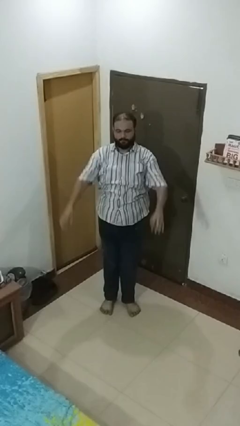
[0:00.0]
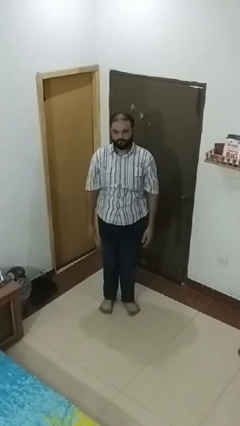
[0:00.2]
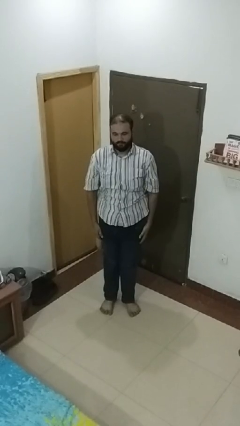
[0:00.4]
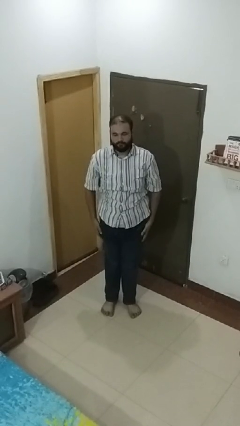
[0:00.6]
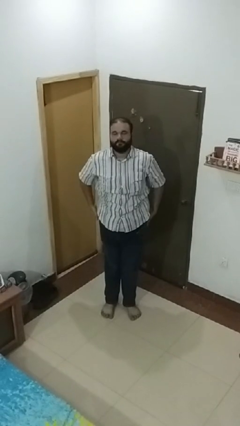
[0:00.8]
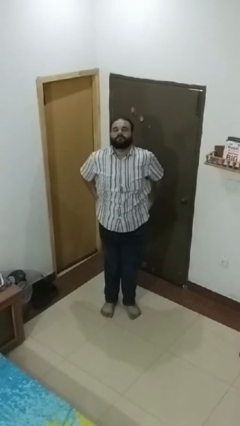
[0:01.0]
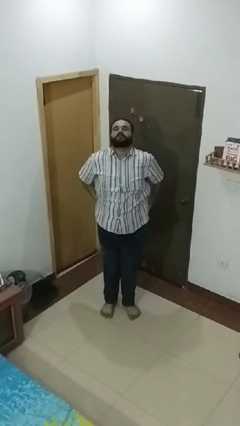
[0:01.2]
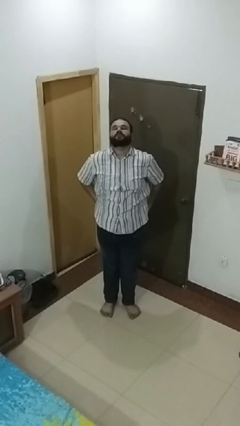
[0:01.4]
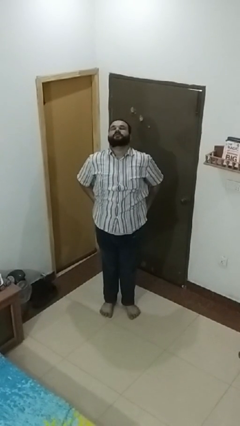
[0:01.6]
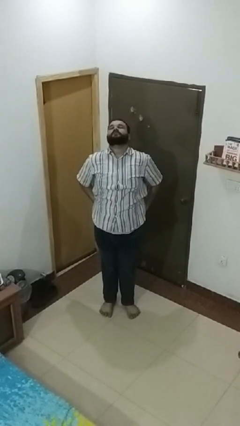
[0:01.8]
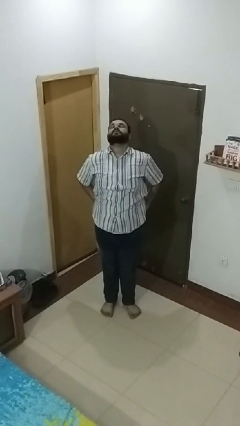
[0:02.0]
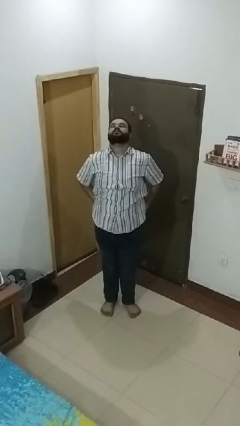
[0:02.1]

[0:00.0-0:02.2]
person stretches back

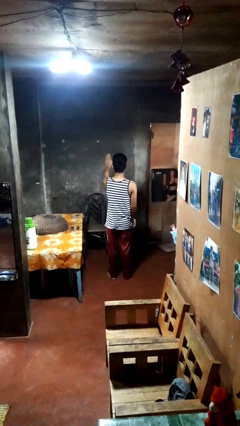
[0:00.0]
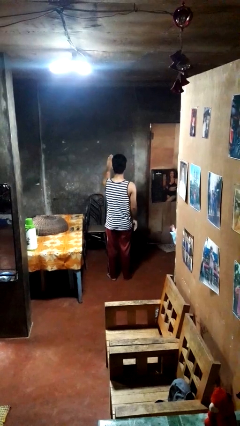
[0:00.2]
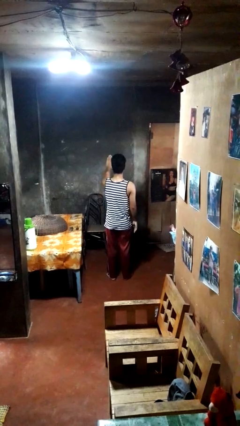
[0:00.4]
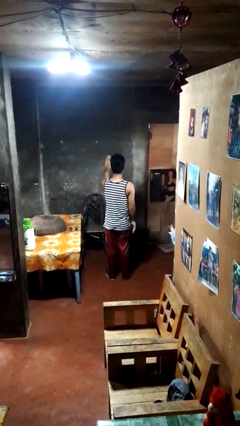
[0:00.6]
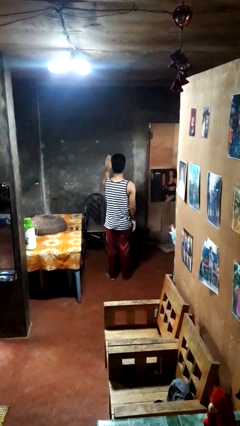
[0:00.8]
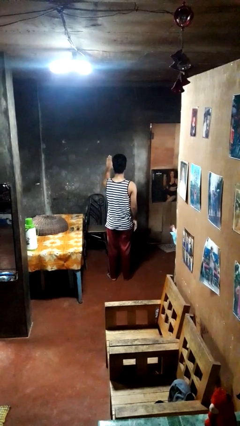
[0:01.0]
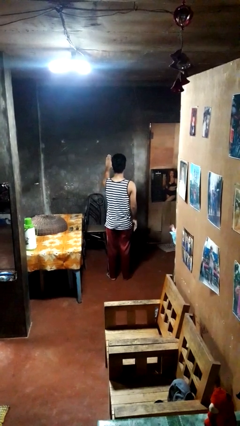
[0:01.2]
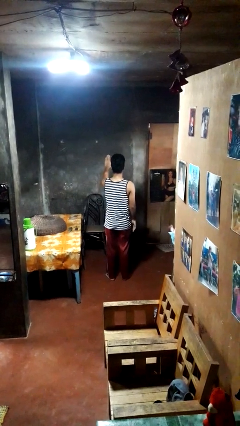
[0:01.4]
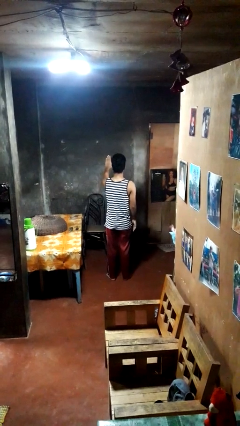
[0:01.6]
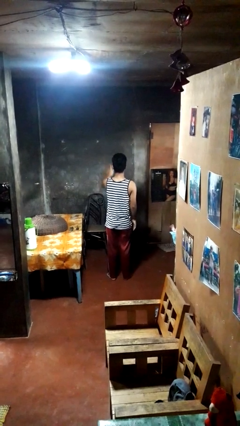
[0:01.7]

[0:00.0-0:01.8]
person gestures stop

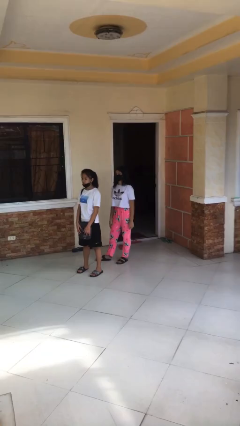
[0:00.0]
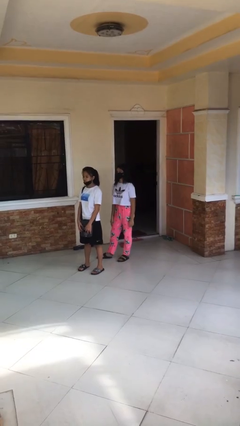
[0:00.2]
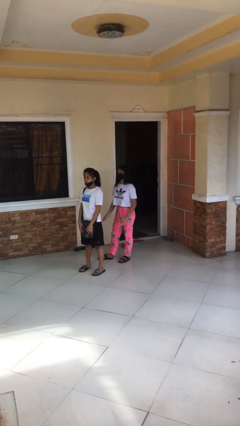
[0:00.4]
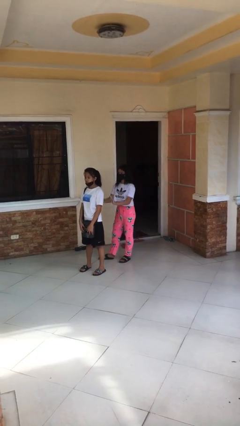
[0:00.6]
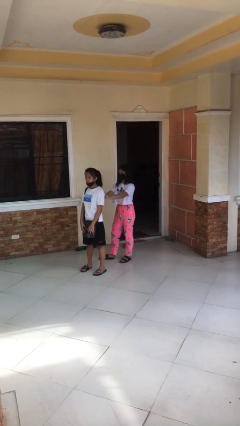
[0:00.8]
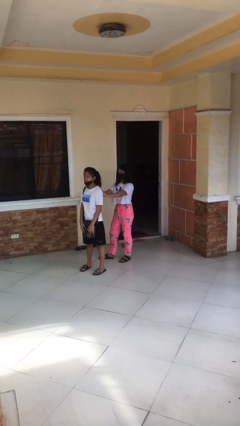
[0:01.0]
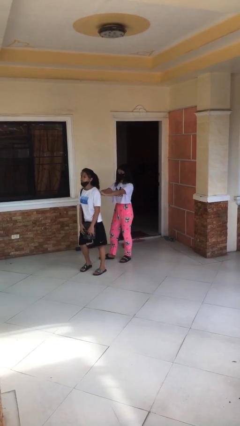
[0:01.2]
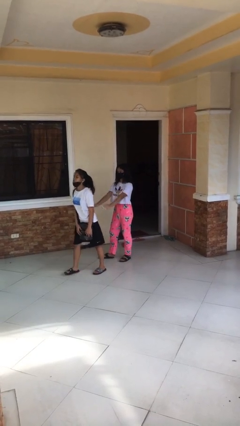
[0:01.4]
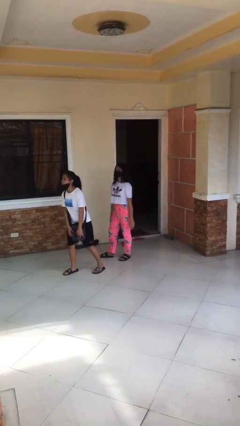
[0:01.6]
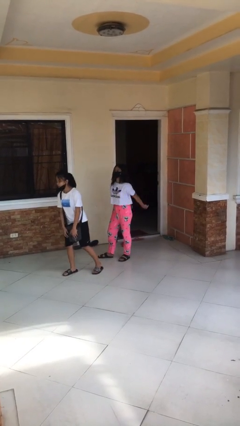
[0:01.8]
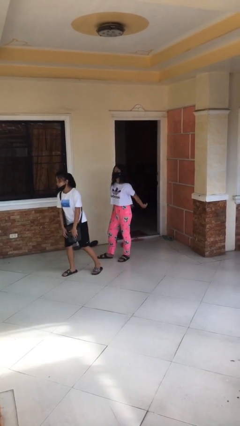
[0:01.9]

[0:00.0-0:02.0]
person shoves person

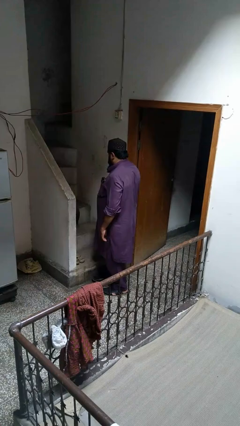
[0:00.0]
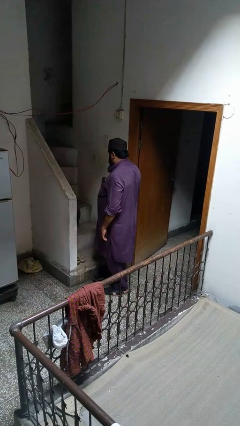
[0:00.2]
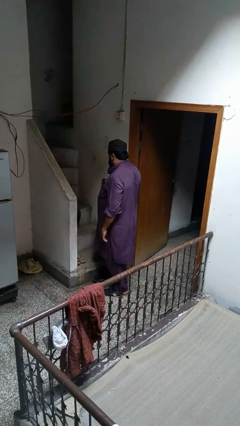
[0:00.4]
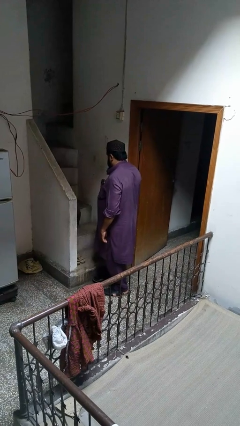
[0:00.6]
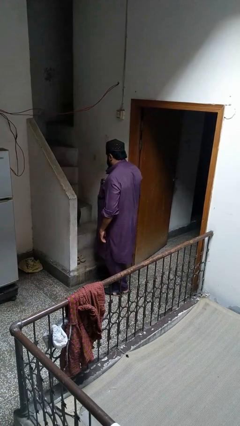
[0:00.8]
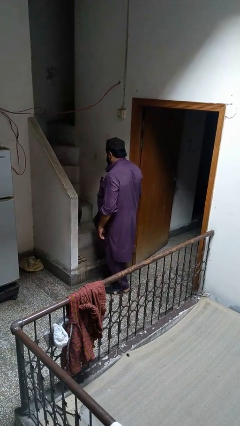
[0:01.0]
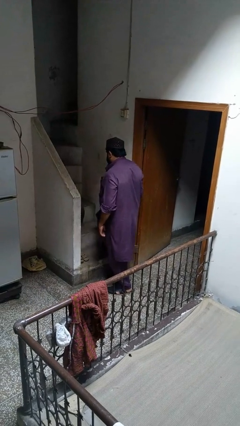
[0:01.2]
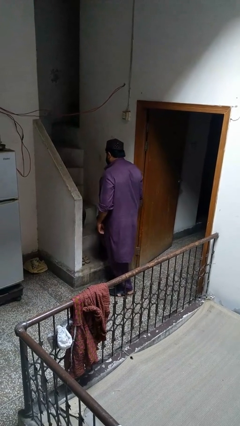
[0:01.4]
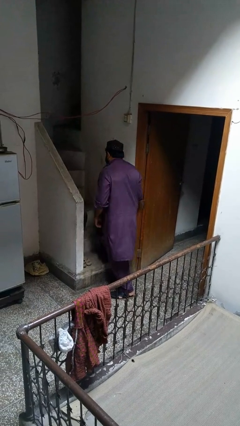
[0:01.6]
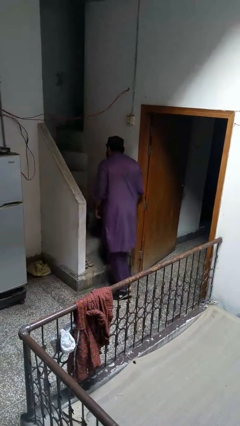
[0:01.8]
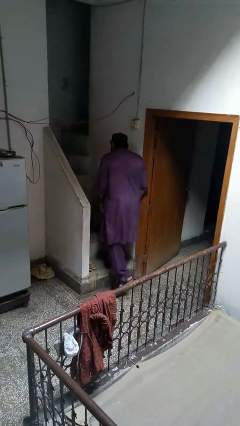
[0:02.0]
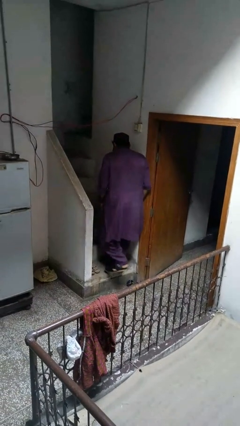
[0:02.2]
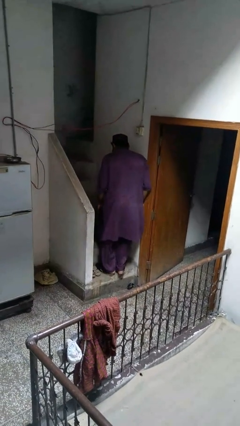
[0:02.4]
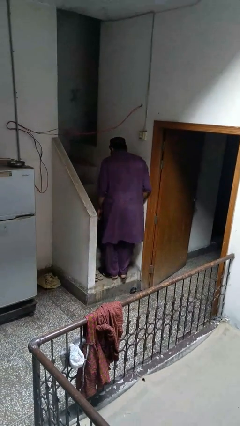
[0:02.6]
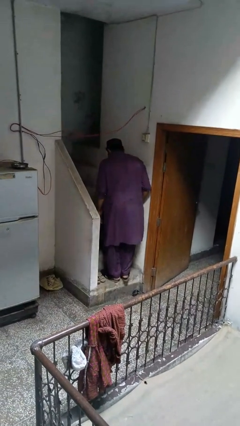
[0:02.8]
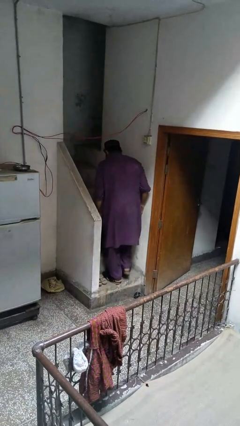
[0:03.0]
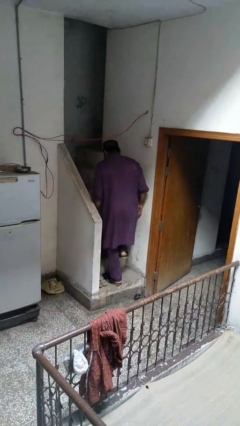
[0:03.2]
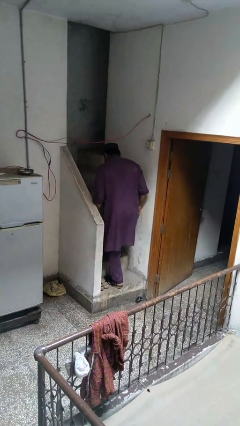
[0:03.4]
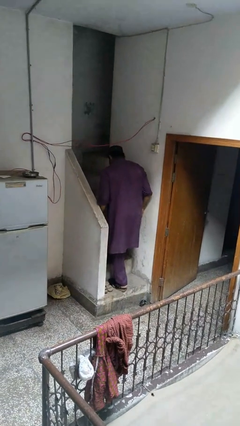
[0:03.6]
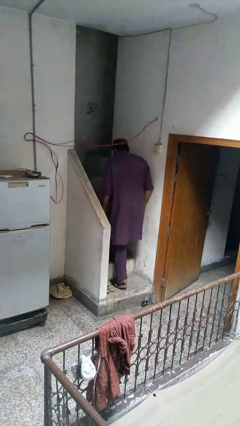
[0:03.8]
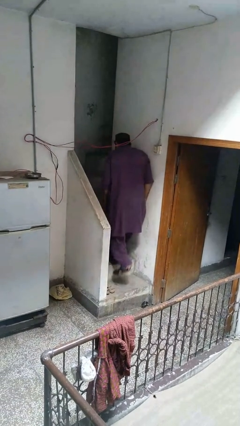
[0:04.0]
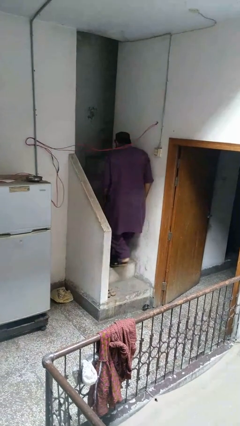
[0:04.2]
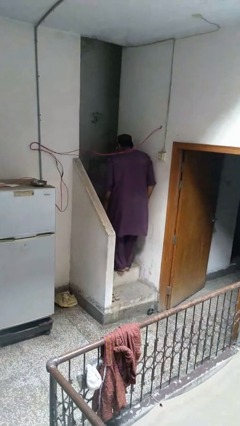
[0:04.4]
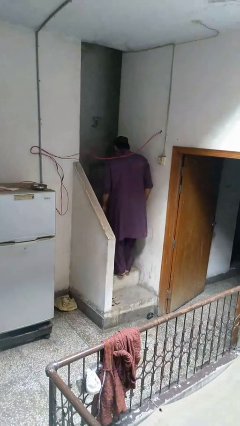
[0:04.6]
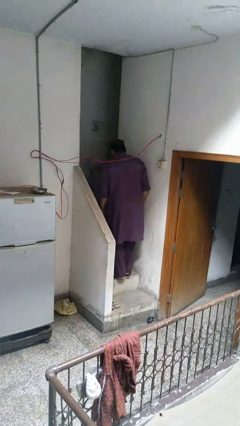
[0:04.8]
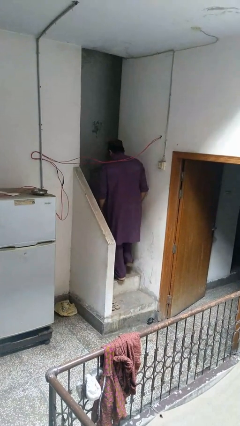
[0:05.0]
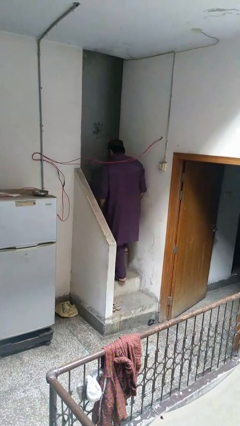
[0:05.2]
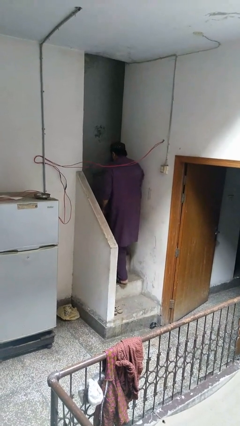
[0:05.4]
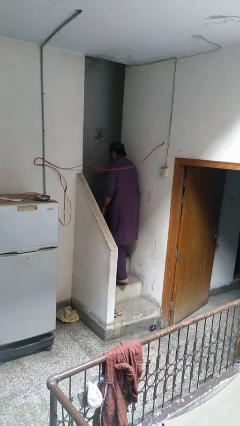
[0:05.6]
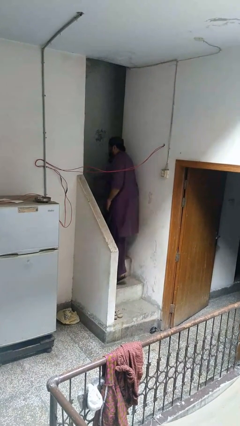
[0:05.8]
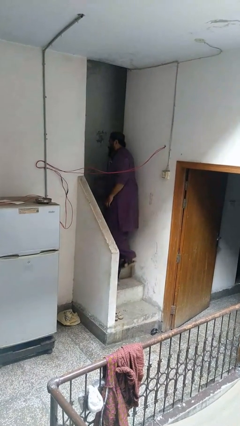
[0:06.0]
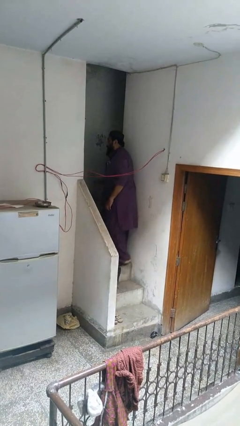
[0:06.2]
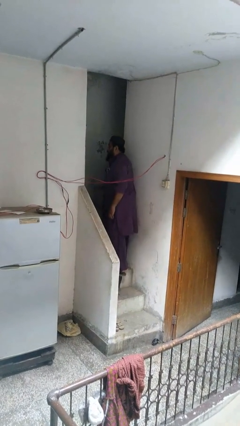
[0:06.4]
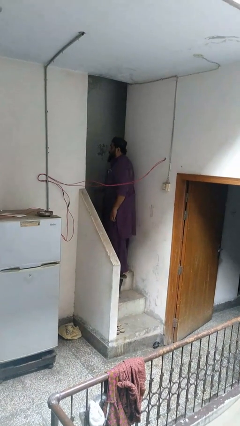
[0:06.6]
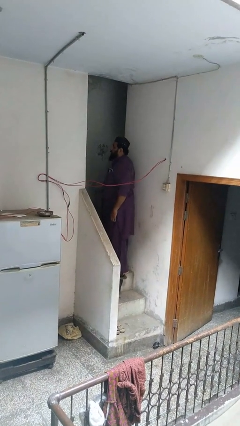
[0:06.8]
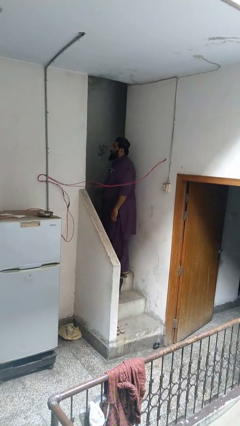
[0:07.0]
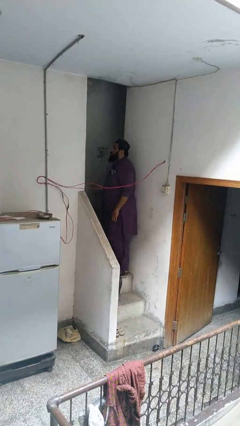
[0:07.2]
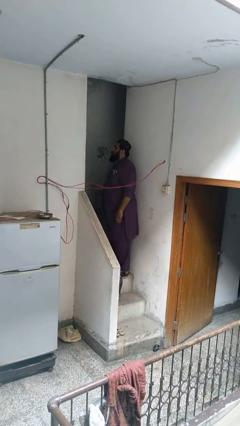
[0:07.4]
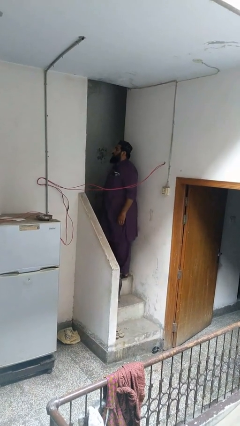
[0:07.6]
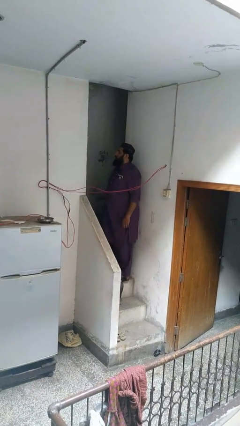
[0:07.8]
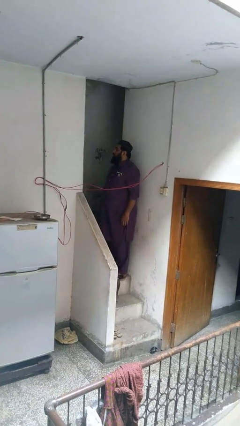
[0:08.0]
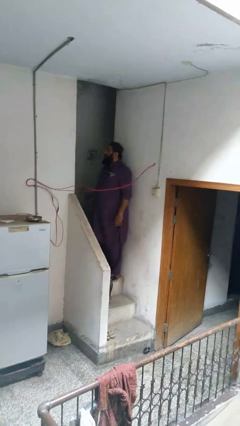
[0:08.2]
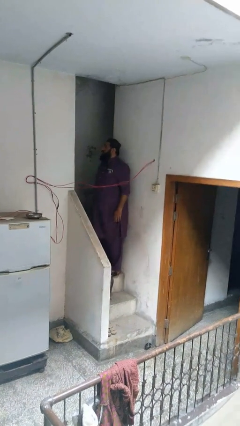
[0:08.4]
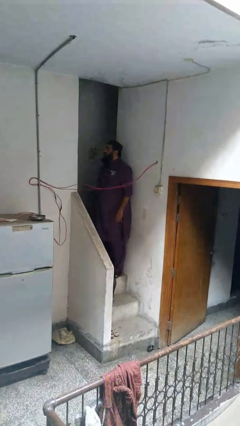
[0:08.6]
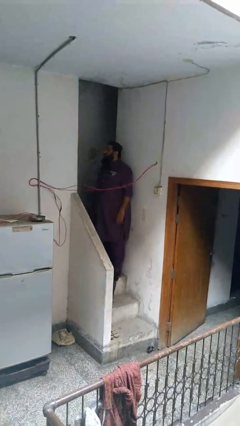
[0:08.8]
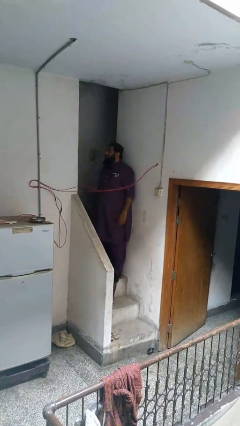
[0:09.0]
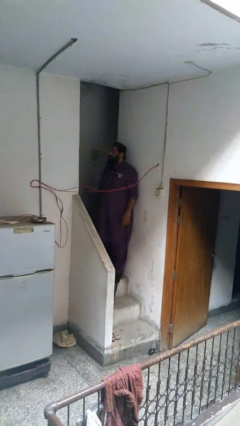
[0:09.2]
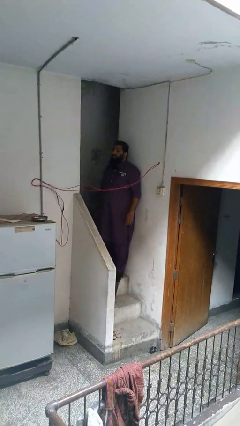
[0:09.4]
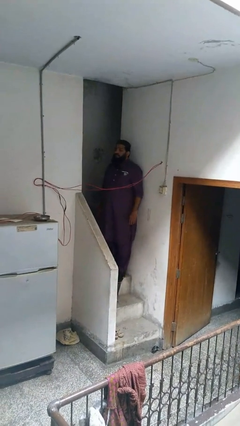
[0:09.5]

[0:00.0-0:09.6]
person climbs up stairs

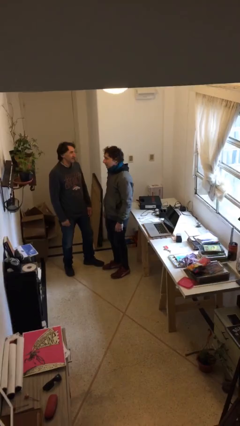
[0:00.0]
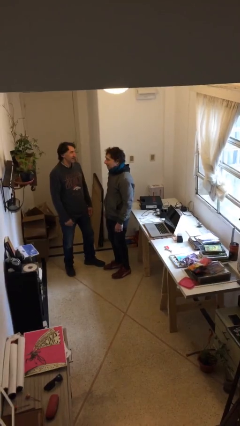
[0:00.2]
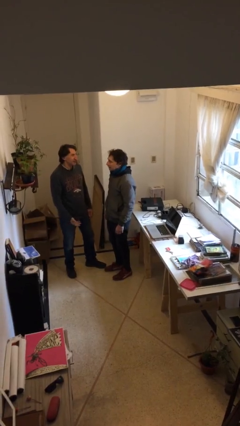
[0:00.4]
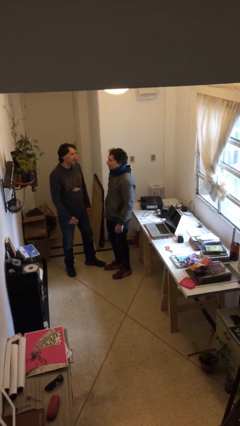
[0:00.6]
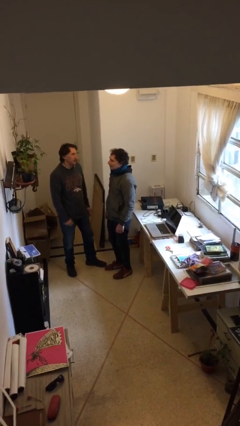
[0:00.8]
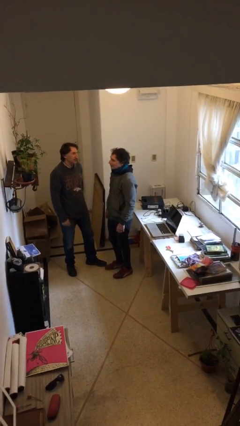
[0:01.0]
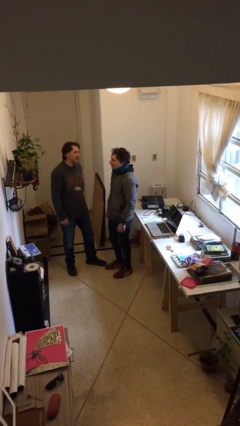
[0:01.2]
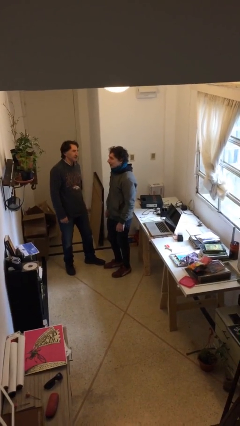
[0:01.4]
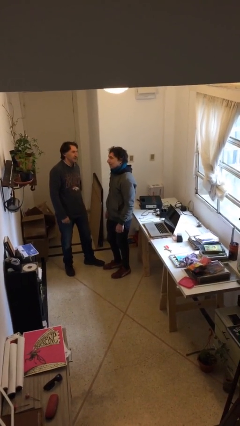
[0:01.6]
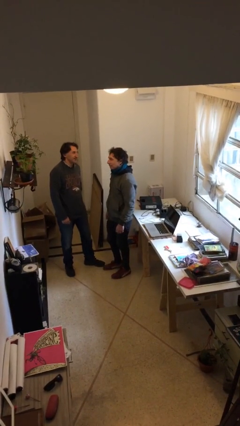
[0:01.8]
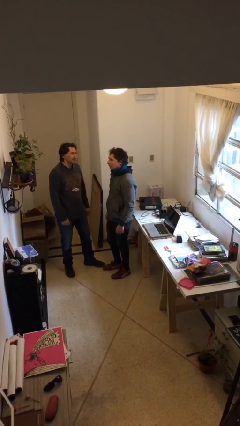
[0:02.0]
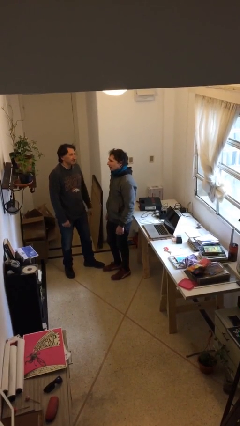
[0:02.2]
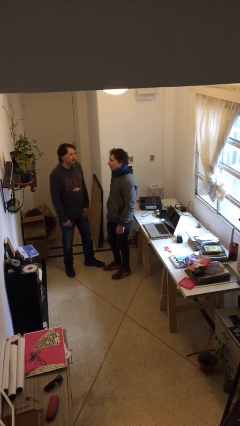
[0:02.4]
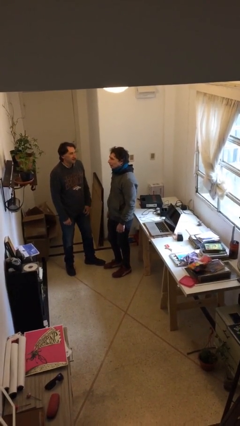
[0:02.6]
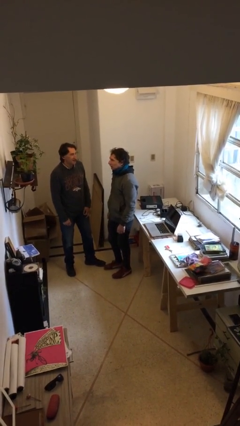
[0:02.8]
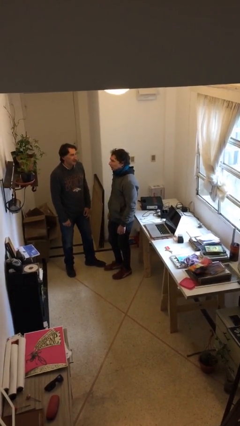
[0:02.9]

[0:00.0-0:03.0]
person talks to person
